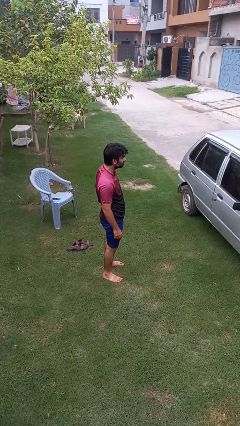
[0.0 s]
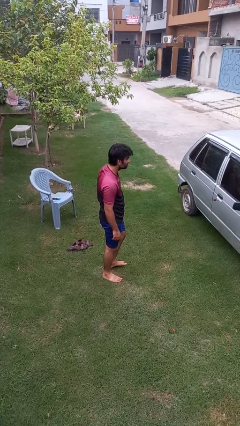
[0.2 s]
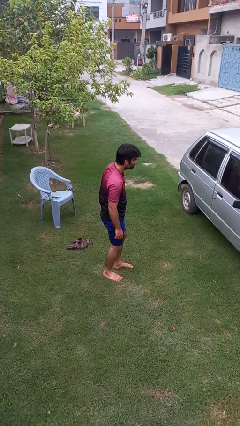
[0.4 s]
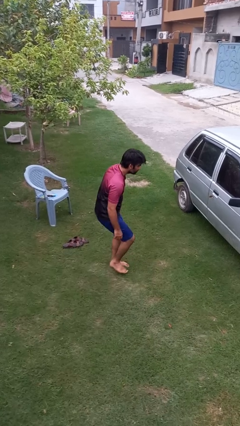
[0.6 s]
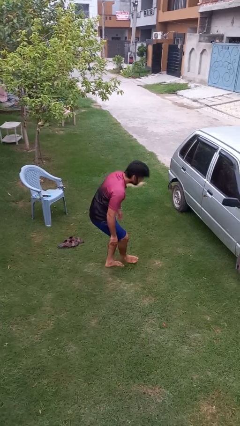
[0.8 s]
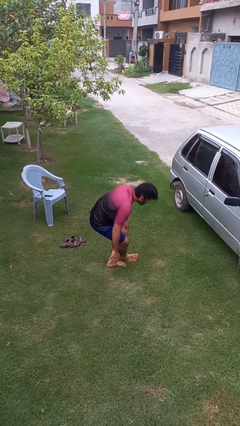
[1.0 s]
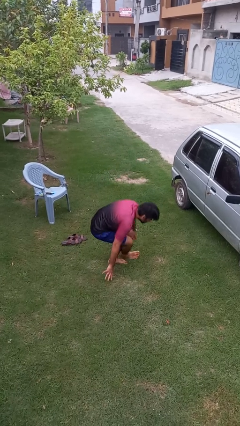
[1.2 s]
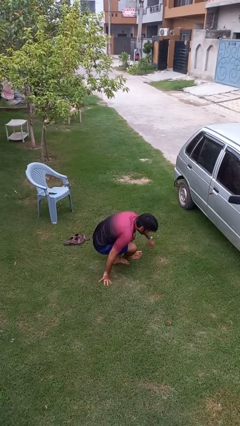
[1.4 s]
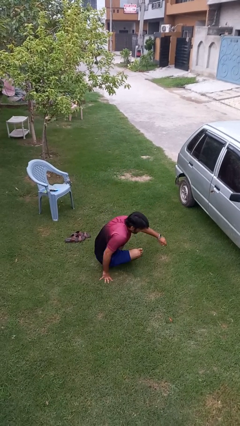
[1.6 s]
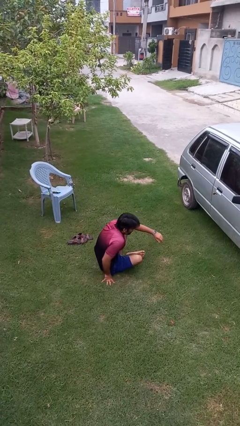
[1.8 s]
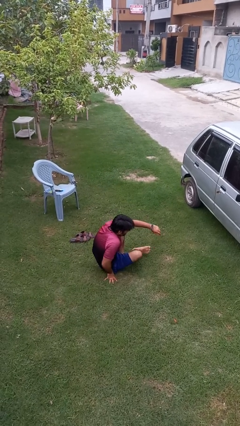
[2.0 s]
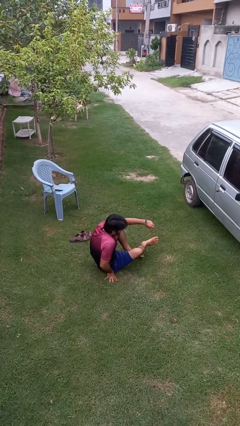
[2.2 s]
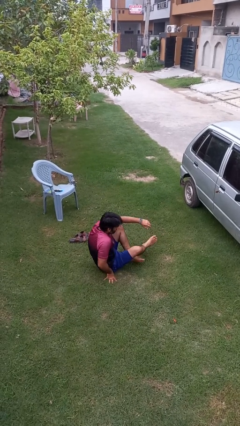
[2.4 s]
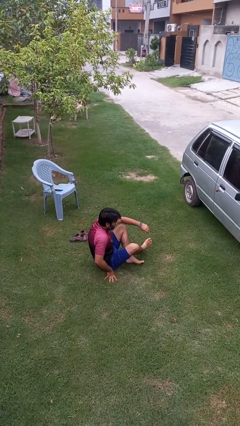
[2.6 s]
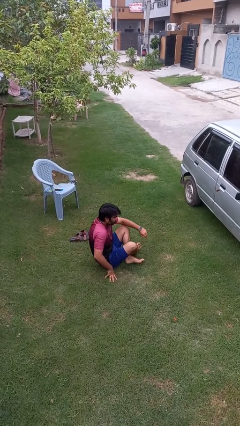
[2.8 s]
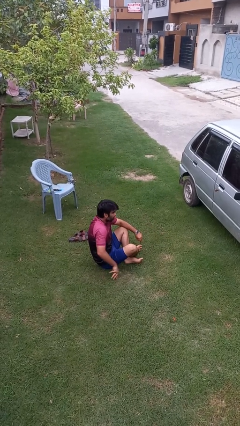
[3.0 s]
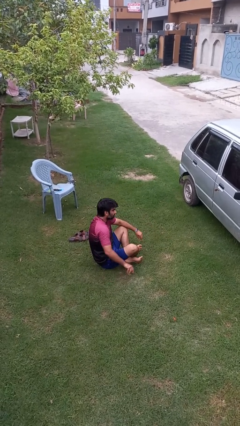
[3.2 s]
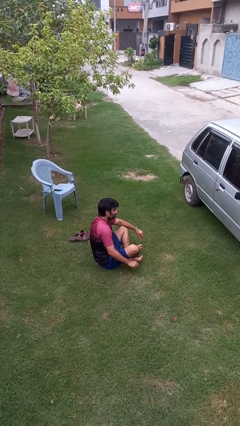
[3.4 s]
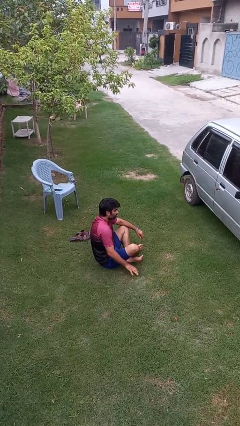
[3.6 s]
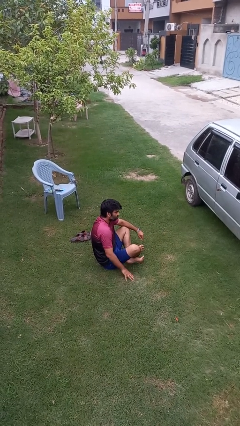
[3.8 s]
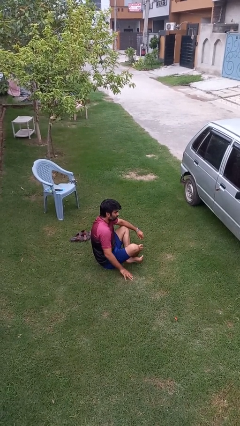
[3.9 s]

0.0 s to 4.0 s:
person sits crisscross

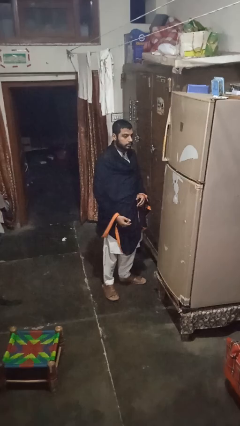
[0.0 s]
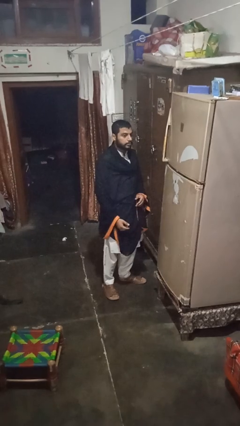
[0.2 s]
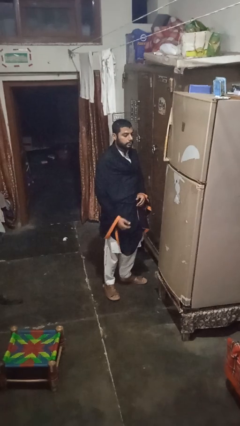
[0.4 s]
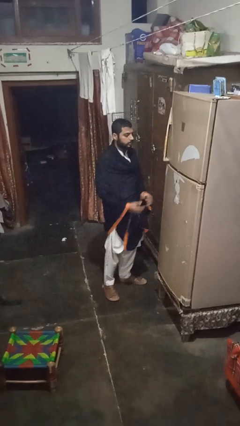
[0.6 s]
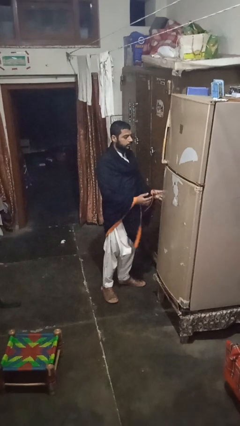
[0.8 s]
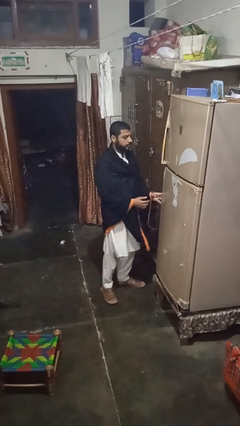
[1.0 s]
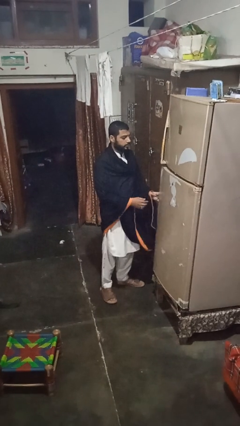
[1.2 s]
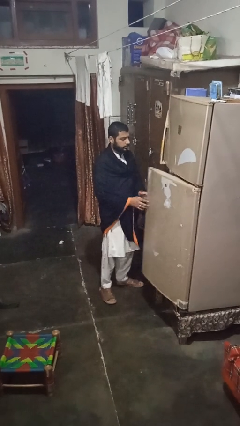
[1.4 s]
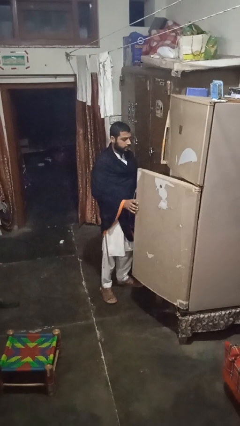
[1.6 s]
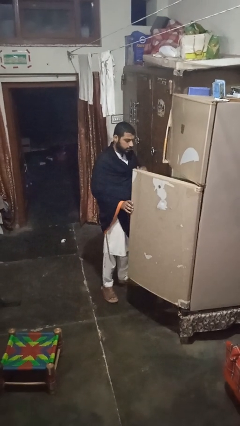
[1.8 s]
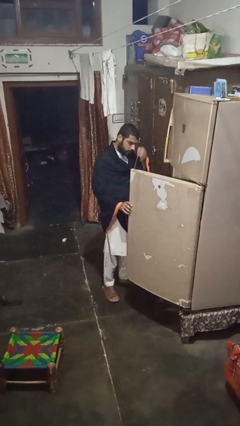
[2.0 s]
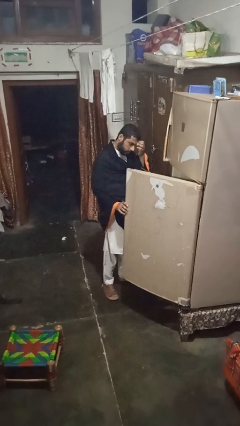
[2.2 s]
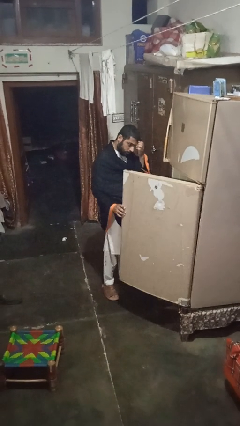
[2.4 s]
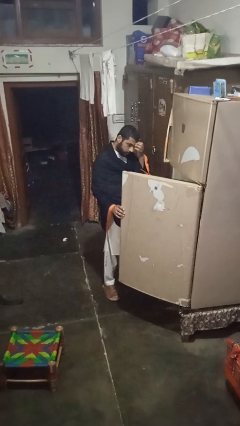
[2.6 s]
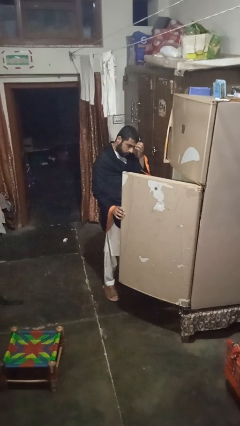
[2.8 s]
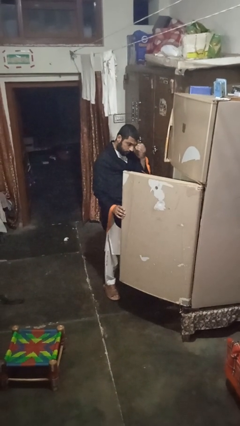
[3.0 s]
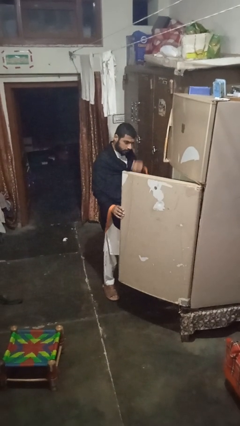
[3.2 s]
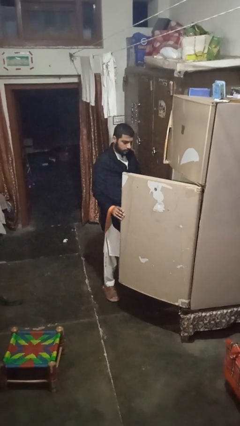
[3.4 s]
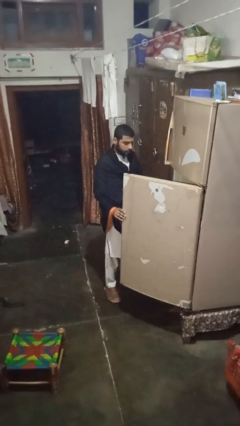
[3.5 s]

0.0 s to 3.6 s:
person opens refrigerator

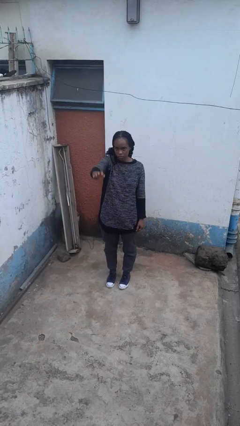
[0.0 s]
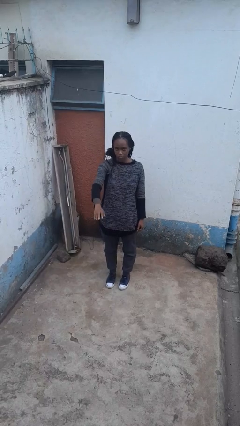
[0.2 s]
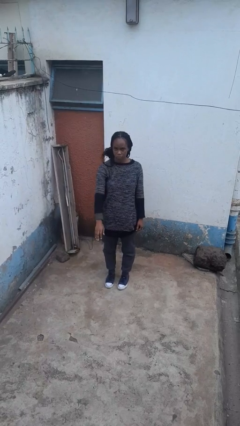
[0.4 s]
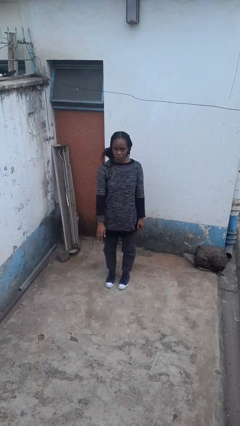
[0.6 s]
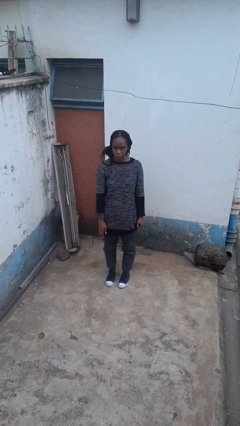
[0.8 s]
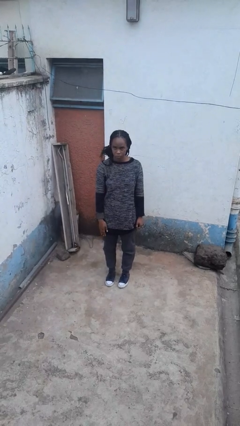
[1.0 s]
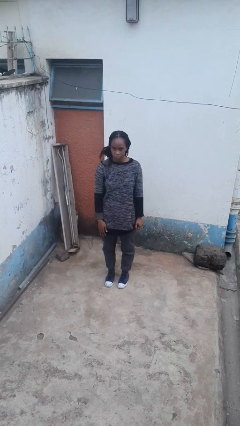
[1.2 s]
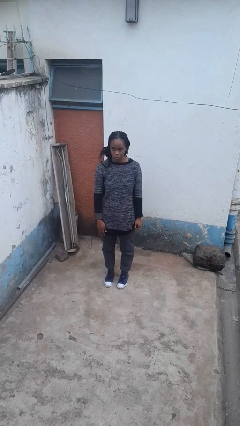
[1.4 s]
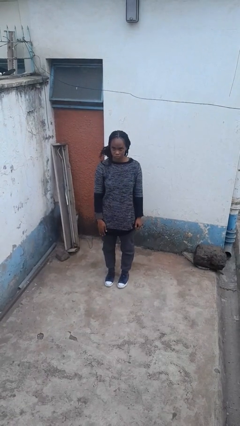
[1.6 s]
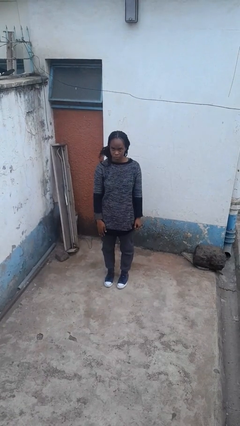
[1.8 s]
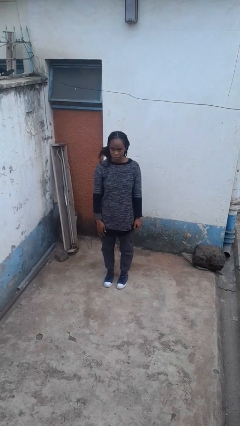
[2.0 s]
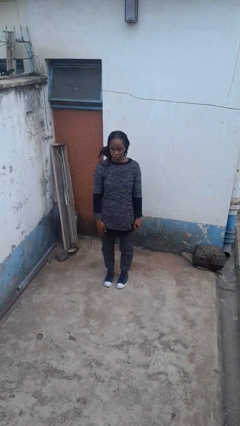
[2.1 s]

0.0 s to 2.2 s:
person gestures lower hand

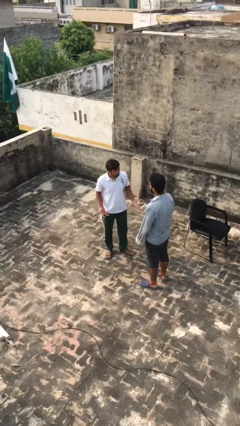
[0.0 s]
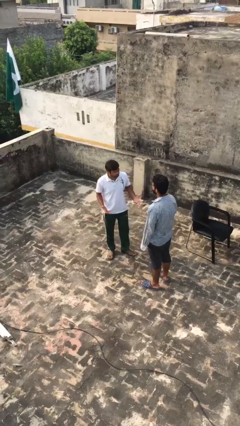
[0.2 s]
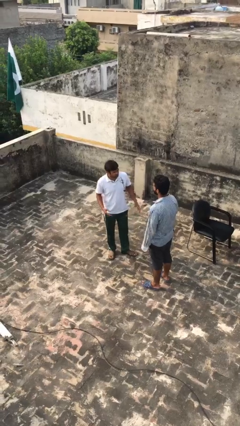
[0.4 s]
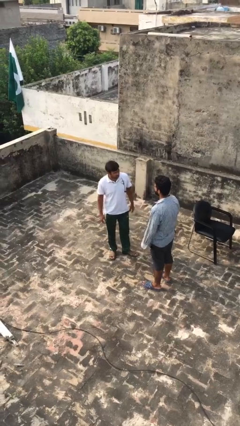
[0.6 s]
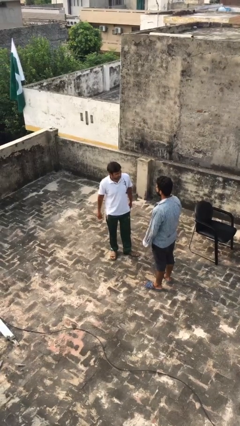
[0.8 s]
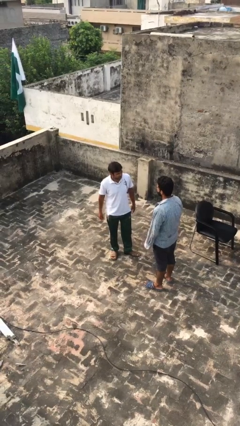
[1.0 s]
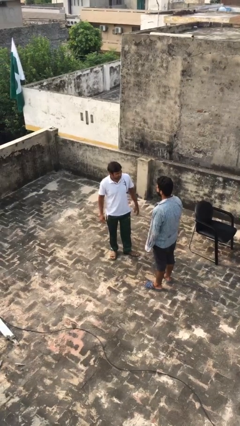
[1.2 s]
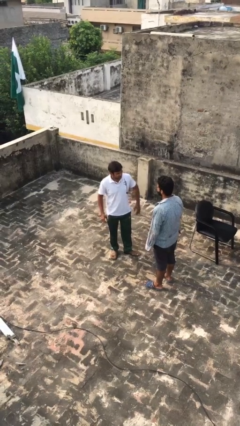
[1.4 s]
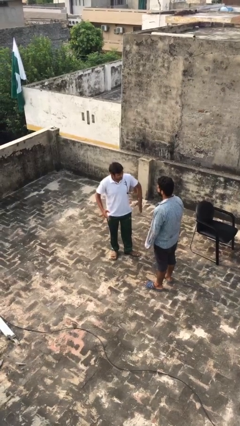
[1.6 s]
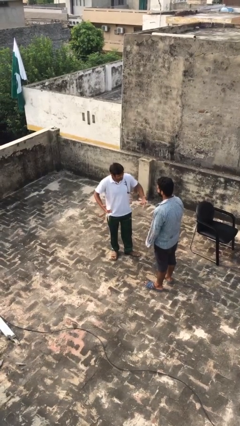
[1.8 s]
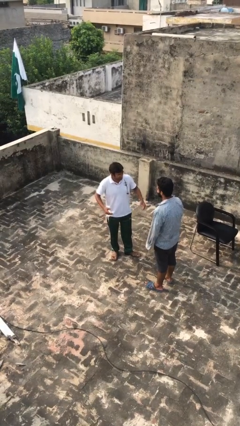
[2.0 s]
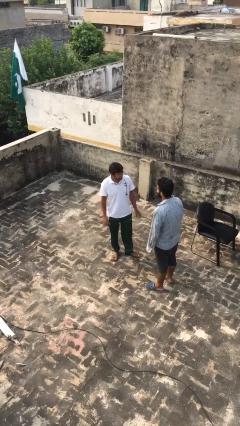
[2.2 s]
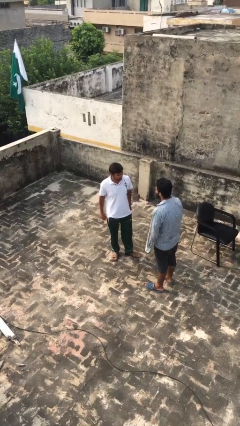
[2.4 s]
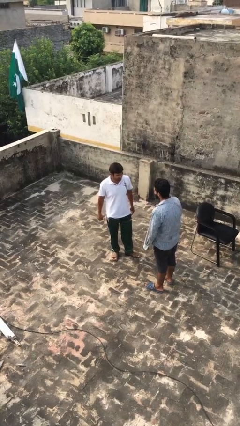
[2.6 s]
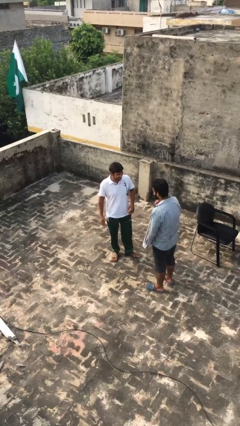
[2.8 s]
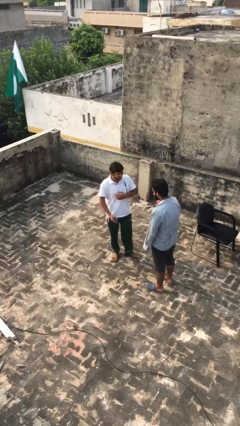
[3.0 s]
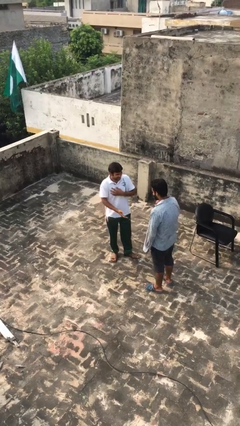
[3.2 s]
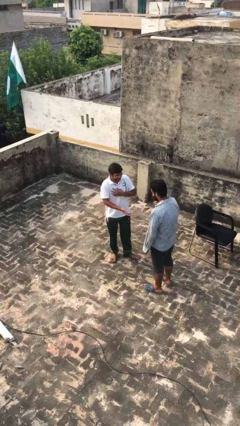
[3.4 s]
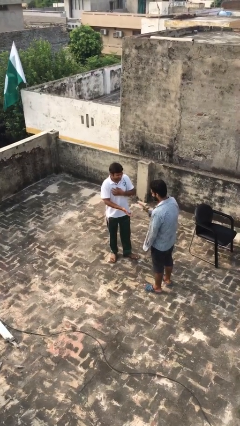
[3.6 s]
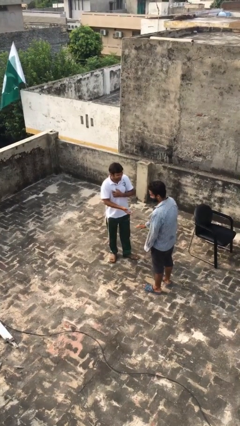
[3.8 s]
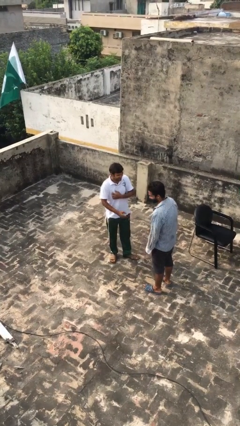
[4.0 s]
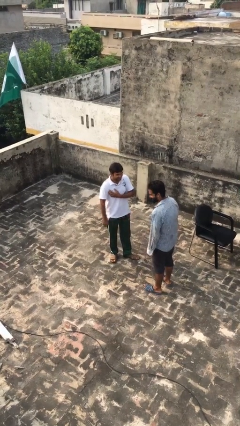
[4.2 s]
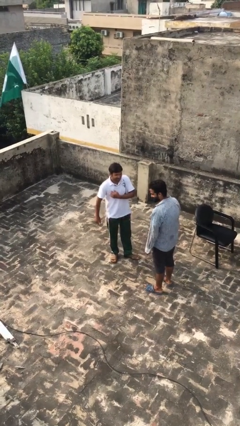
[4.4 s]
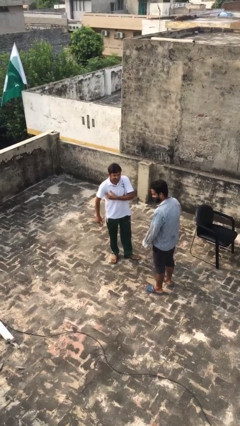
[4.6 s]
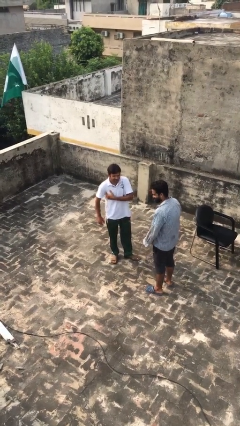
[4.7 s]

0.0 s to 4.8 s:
person talks to person

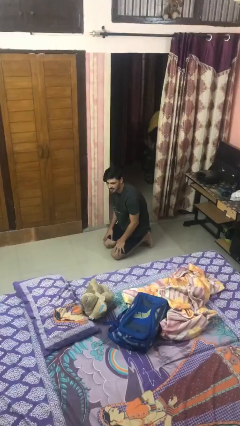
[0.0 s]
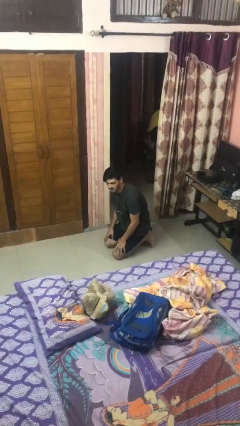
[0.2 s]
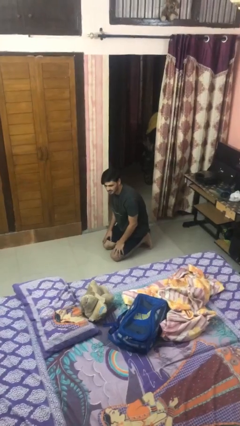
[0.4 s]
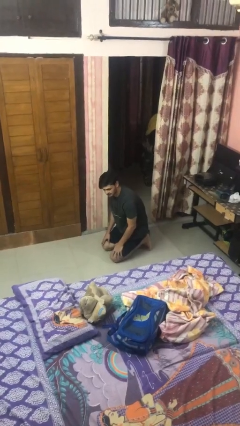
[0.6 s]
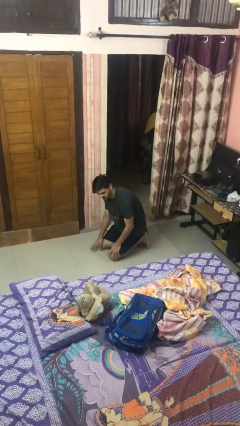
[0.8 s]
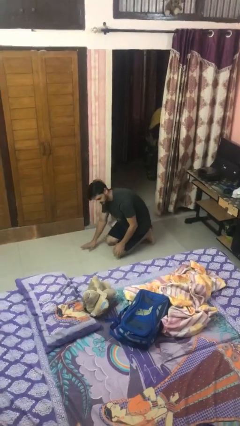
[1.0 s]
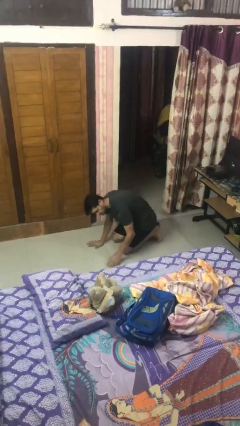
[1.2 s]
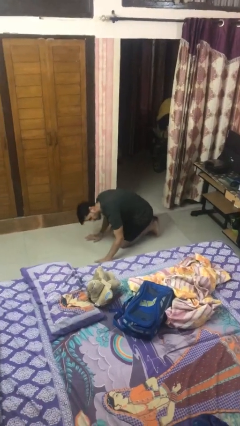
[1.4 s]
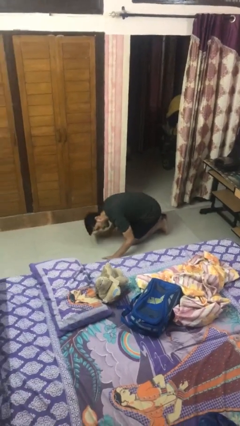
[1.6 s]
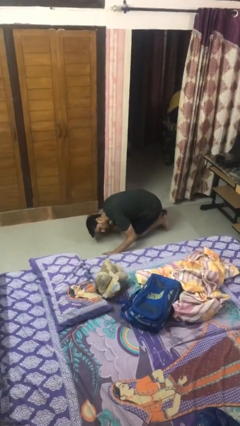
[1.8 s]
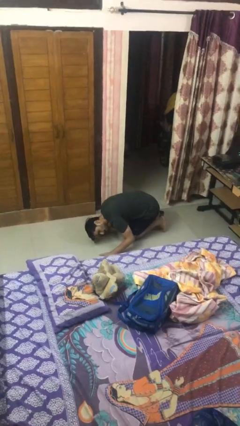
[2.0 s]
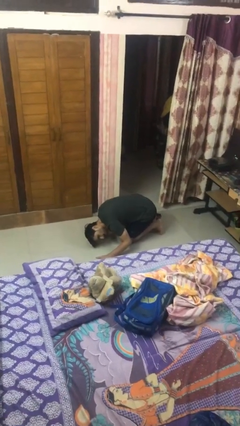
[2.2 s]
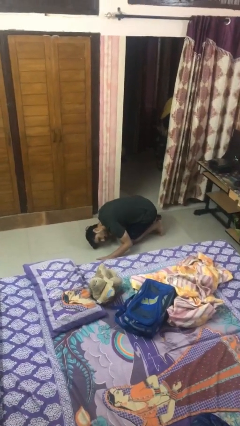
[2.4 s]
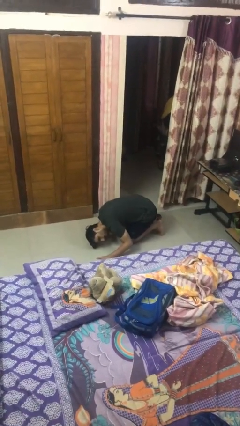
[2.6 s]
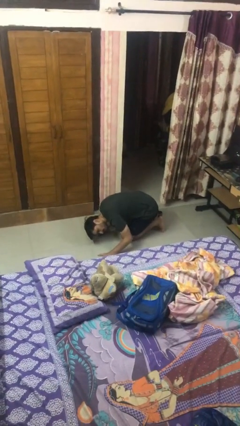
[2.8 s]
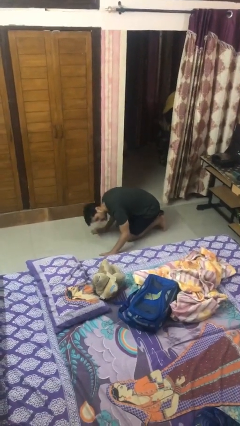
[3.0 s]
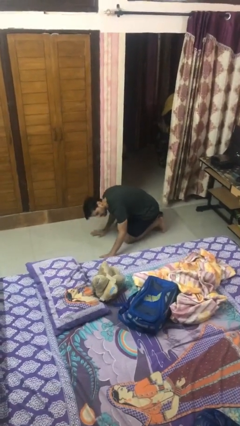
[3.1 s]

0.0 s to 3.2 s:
person searches under bed
